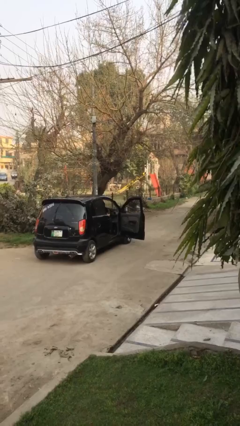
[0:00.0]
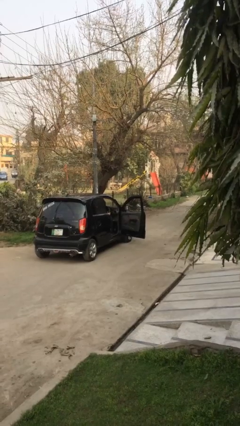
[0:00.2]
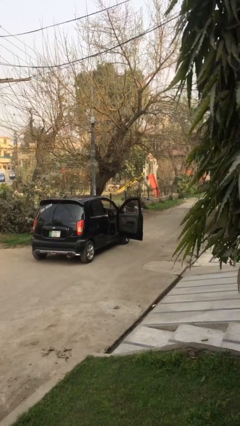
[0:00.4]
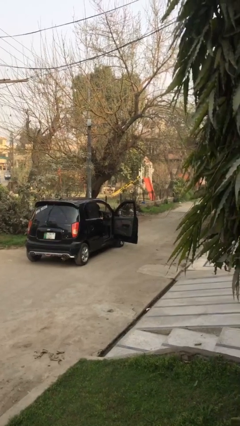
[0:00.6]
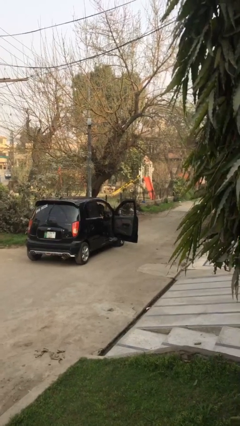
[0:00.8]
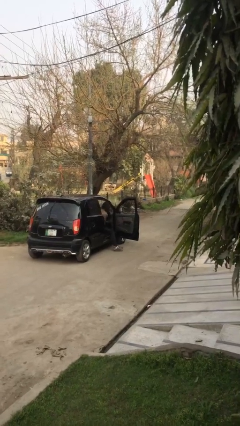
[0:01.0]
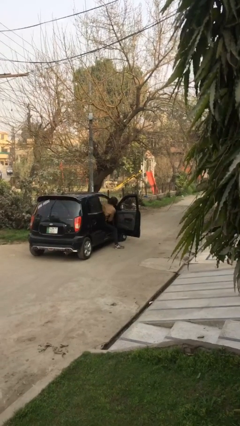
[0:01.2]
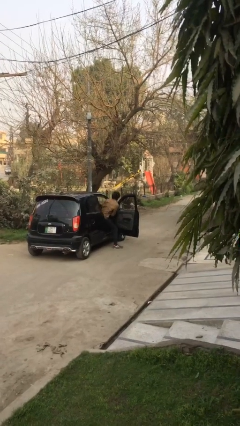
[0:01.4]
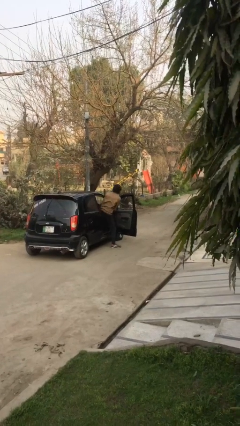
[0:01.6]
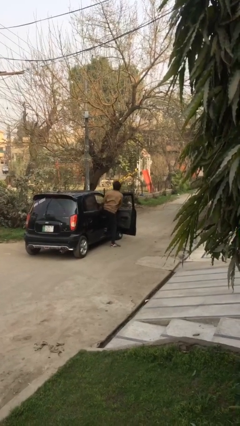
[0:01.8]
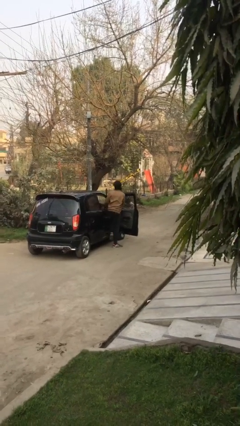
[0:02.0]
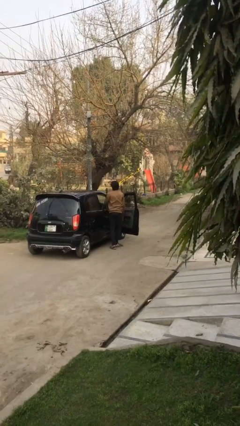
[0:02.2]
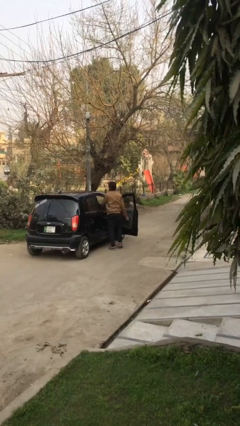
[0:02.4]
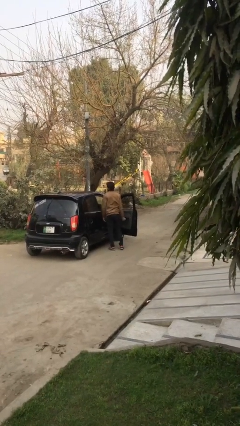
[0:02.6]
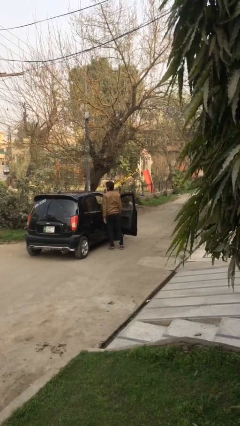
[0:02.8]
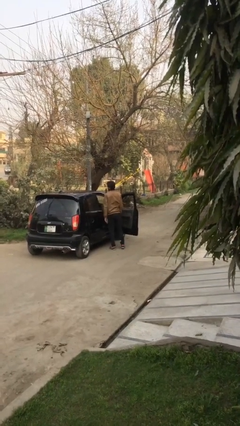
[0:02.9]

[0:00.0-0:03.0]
person exits car

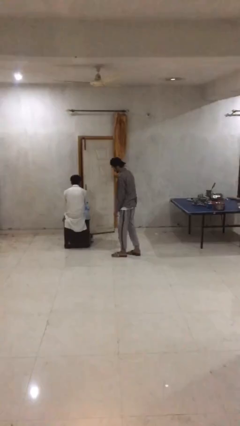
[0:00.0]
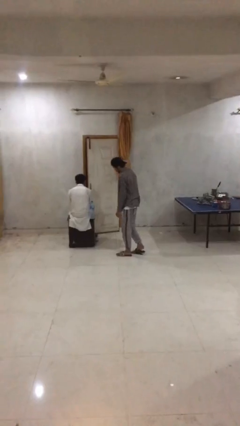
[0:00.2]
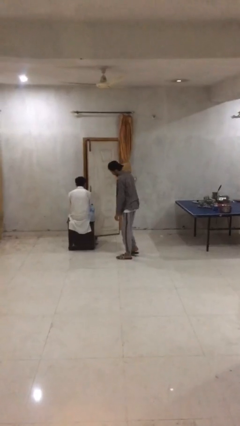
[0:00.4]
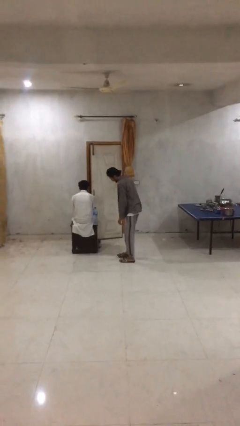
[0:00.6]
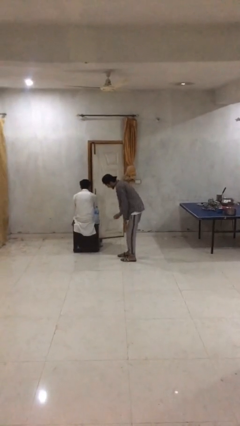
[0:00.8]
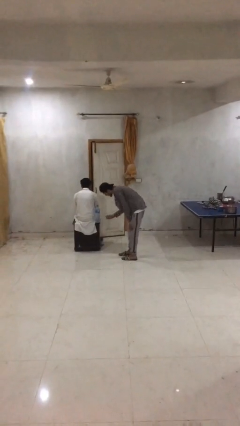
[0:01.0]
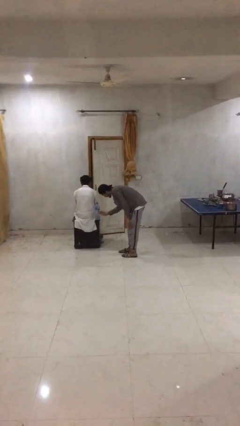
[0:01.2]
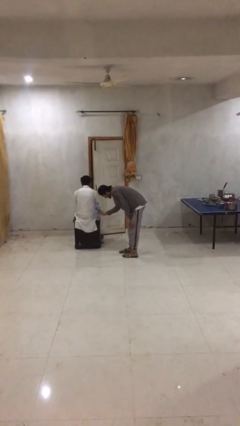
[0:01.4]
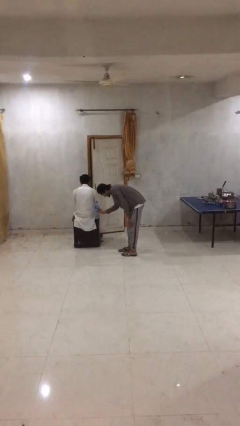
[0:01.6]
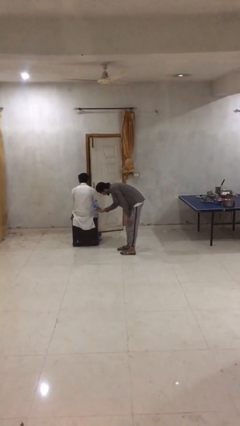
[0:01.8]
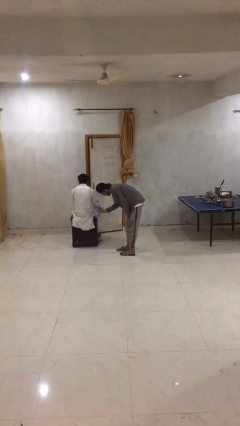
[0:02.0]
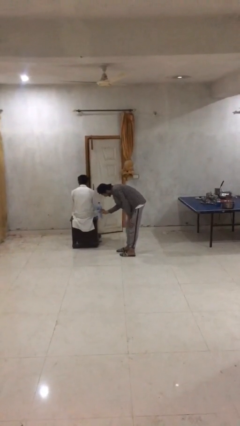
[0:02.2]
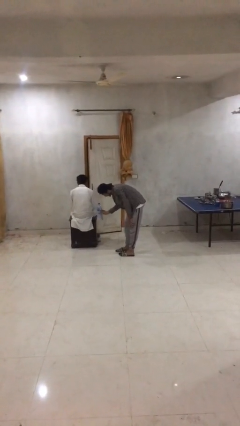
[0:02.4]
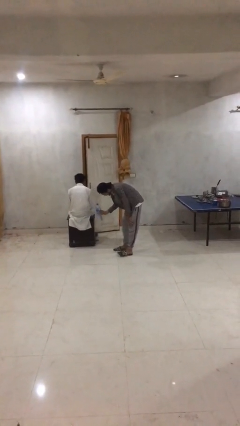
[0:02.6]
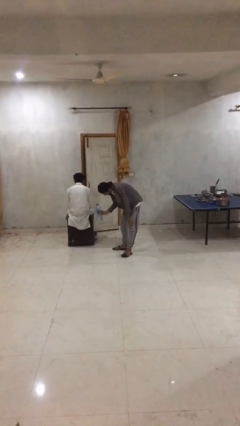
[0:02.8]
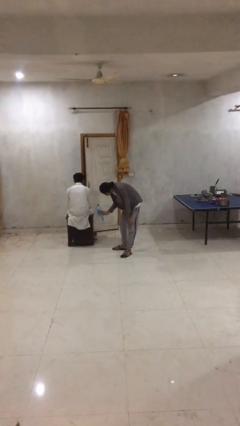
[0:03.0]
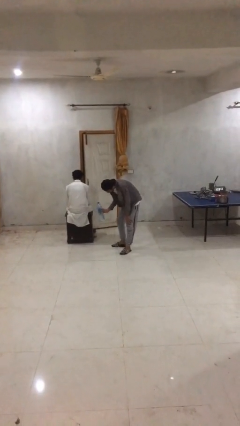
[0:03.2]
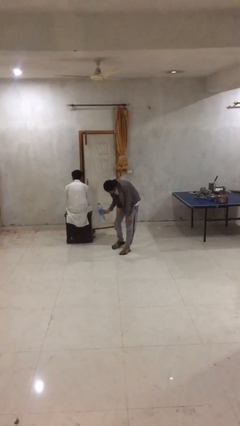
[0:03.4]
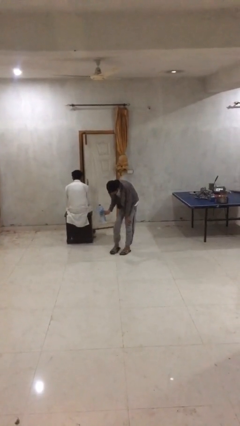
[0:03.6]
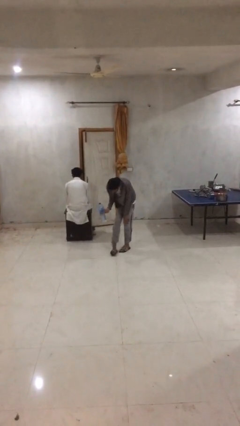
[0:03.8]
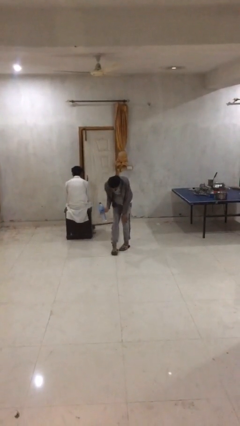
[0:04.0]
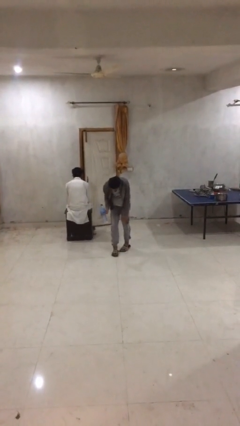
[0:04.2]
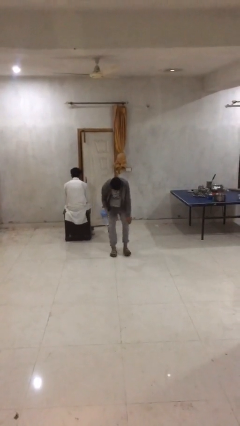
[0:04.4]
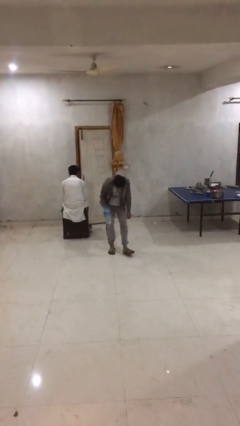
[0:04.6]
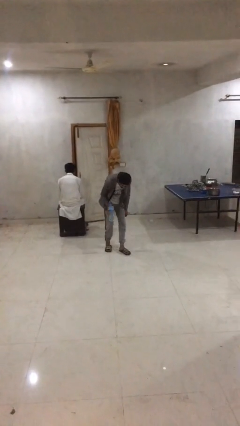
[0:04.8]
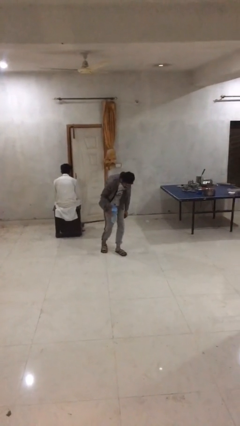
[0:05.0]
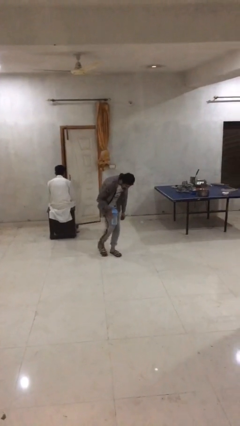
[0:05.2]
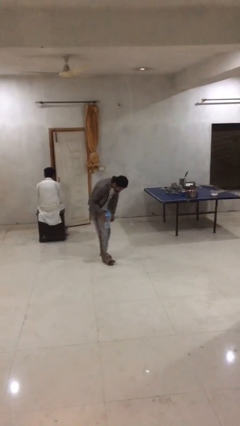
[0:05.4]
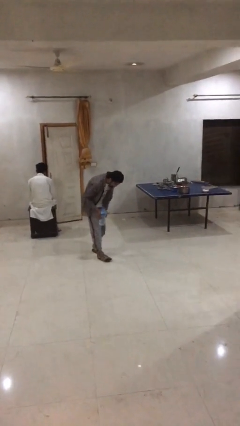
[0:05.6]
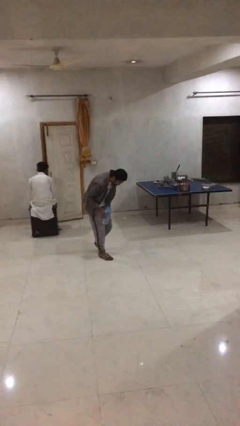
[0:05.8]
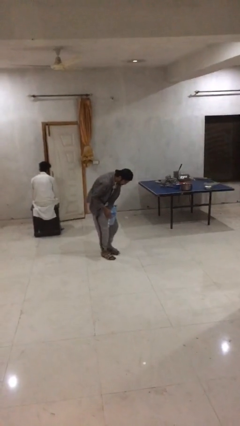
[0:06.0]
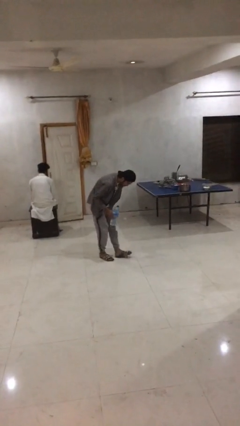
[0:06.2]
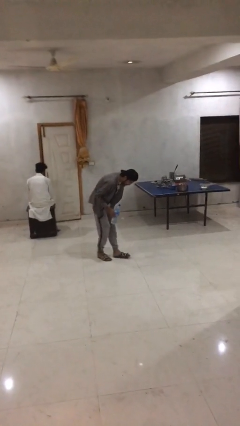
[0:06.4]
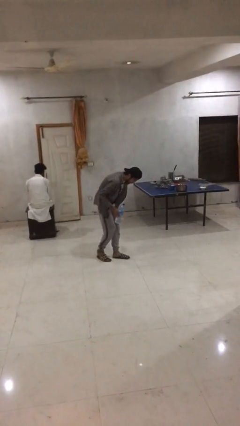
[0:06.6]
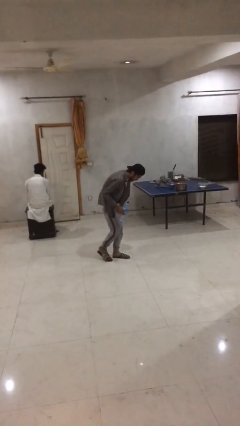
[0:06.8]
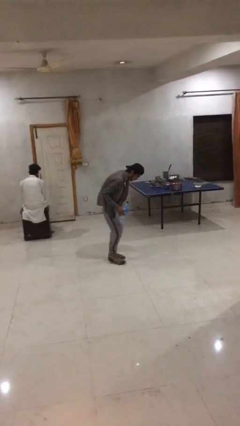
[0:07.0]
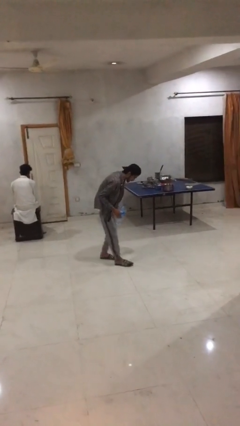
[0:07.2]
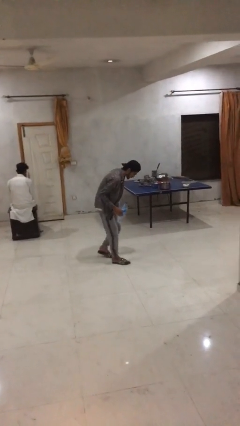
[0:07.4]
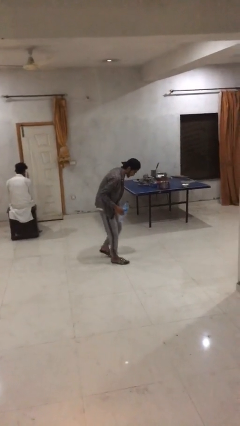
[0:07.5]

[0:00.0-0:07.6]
person steals object from person

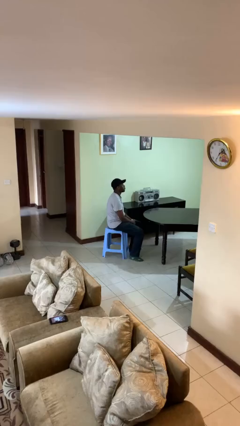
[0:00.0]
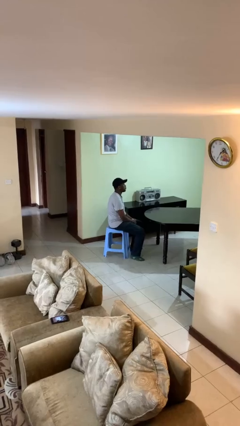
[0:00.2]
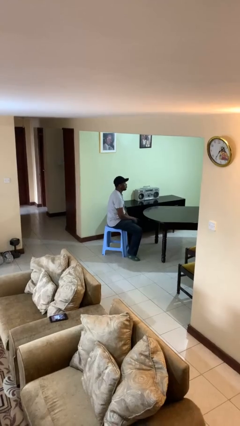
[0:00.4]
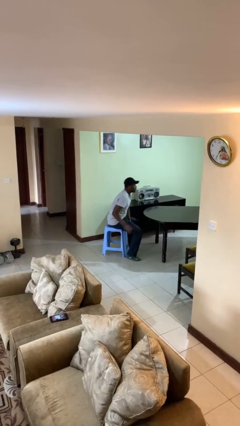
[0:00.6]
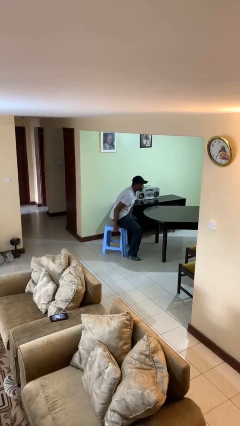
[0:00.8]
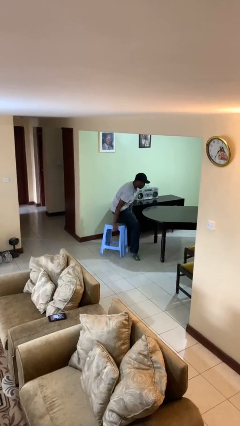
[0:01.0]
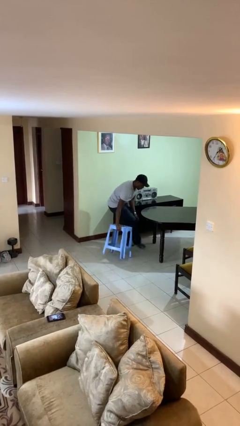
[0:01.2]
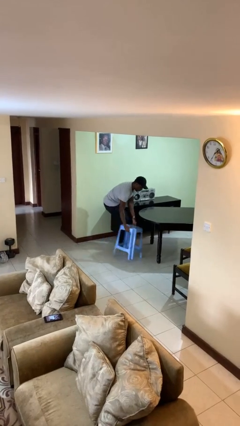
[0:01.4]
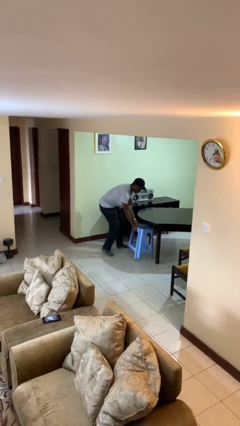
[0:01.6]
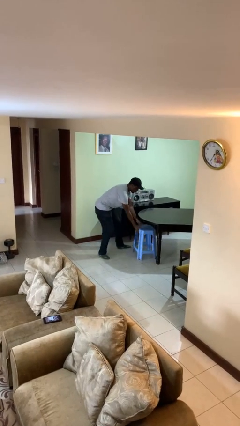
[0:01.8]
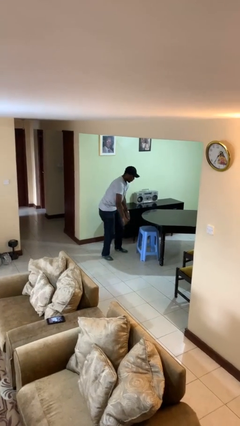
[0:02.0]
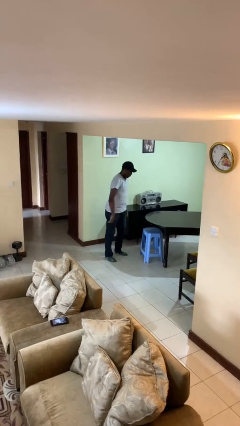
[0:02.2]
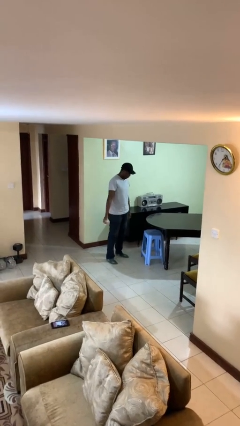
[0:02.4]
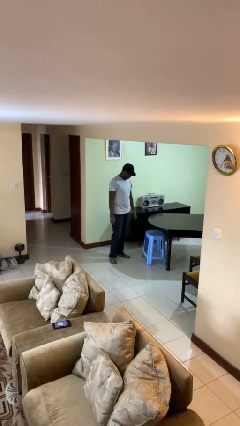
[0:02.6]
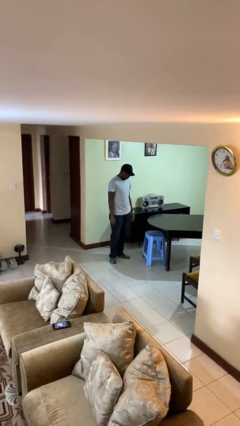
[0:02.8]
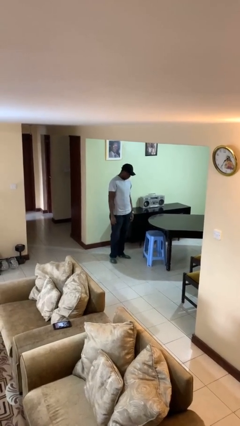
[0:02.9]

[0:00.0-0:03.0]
person stands up

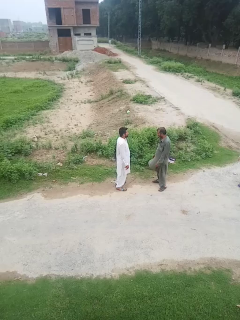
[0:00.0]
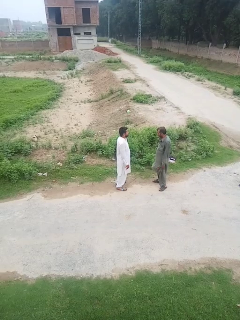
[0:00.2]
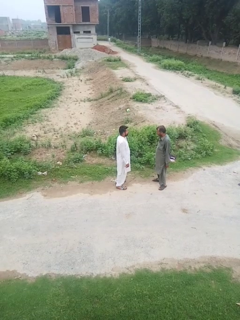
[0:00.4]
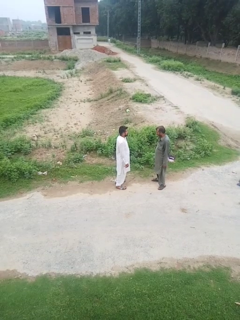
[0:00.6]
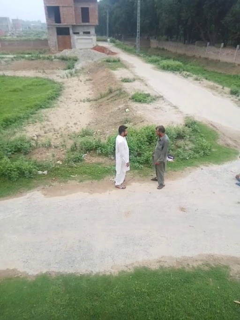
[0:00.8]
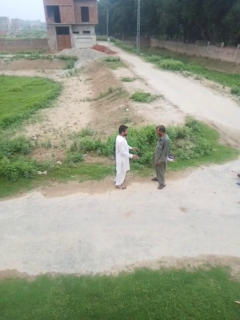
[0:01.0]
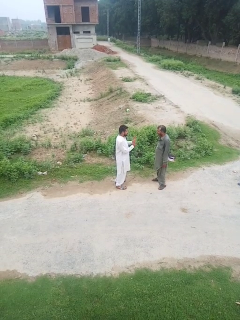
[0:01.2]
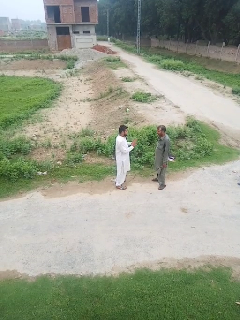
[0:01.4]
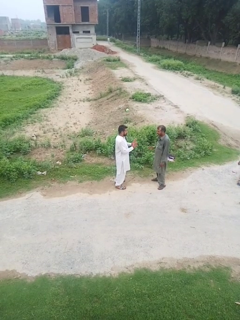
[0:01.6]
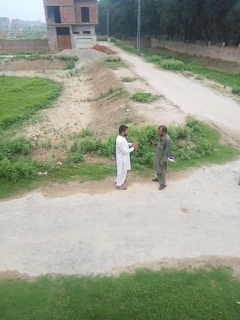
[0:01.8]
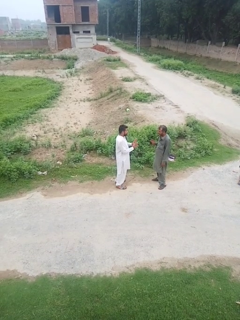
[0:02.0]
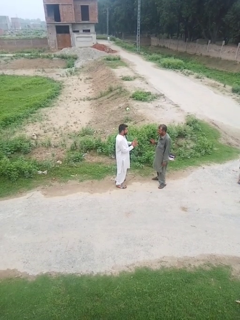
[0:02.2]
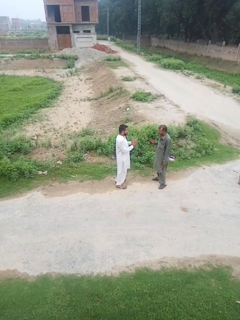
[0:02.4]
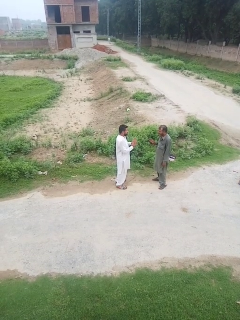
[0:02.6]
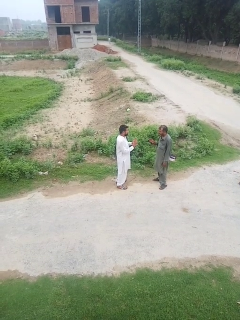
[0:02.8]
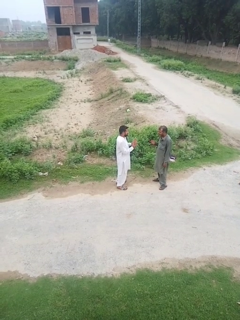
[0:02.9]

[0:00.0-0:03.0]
person talks to person

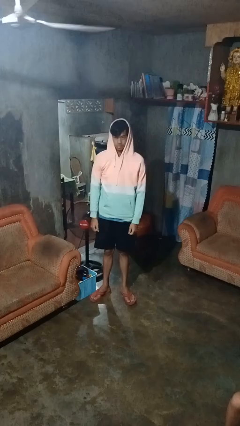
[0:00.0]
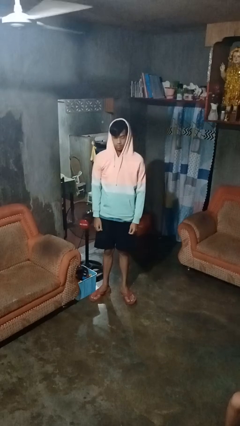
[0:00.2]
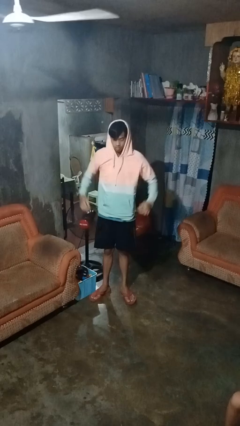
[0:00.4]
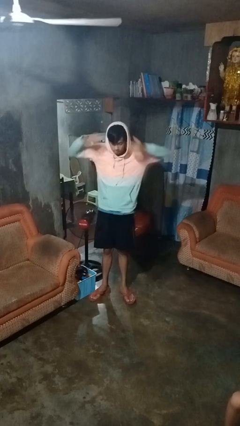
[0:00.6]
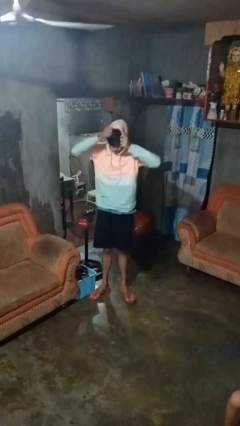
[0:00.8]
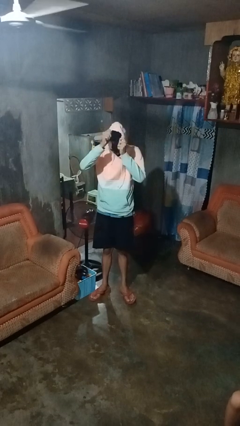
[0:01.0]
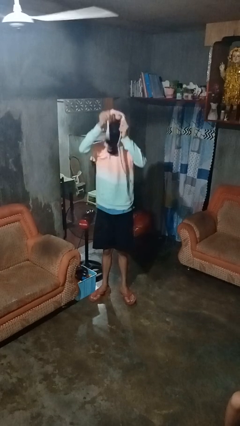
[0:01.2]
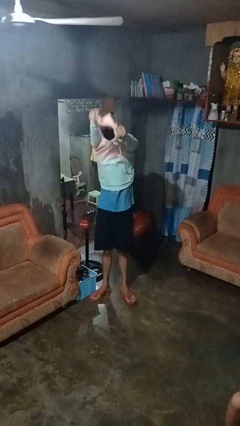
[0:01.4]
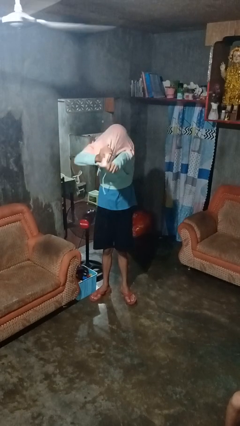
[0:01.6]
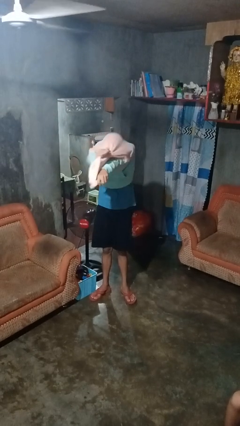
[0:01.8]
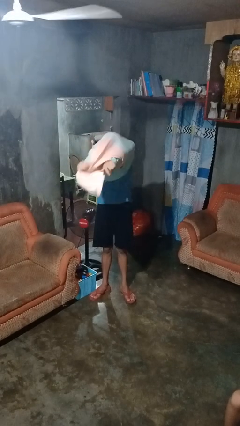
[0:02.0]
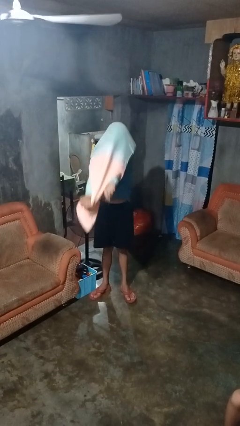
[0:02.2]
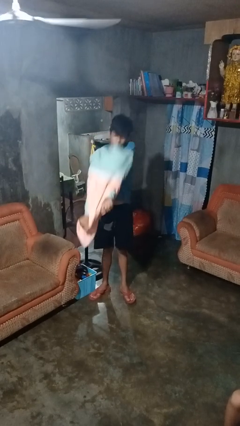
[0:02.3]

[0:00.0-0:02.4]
person takes off hoodie
